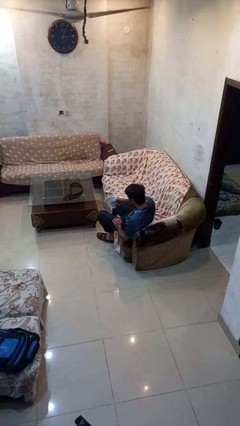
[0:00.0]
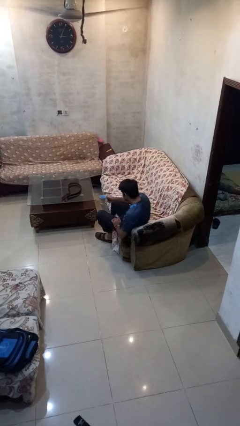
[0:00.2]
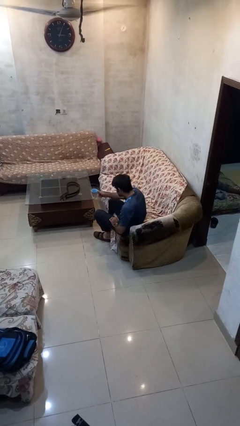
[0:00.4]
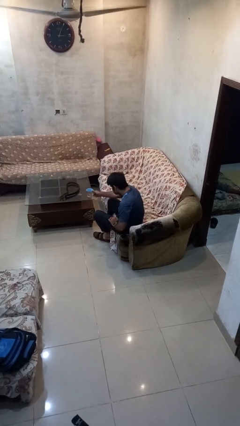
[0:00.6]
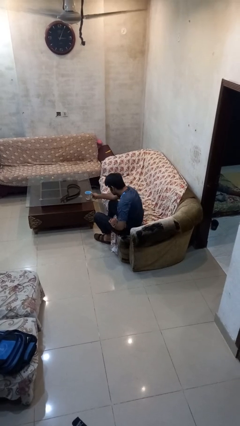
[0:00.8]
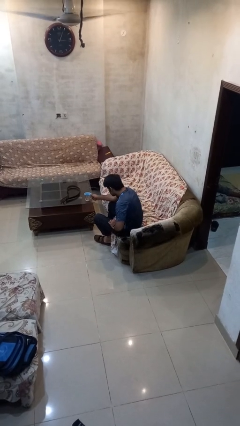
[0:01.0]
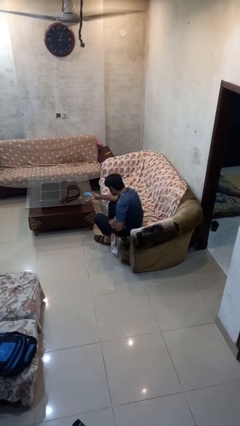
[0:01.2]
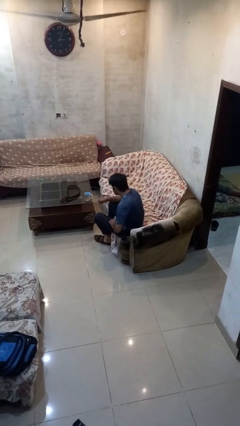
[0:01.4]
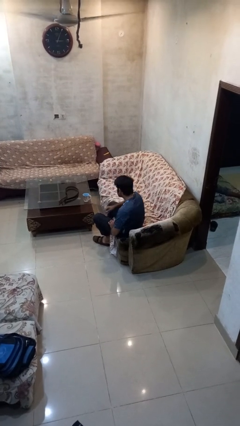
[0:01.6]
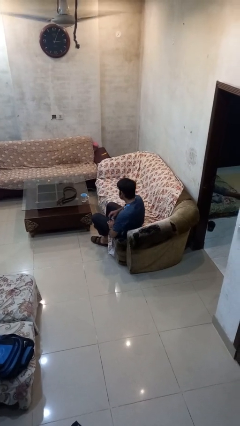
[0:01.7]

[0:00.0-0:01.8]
person puts down object on table

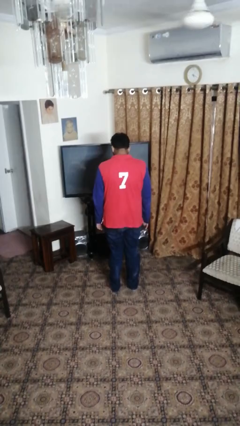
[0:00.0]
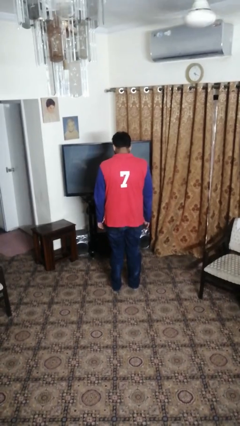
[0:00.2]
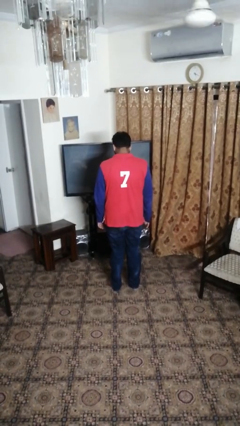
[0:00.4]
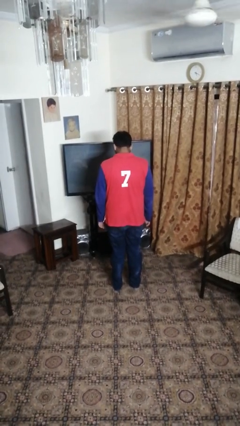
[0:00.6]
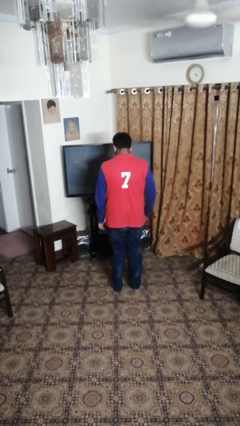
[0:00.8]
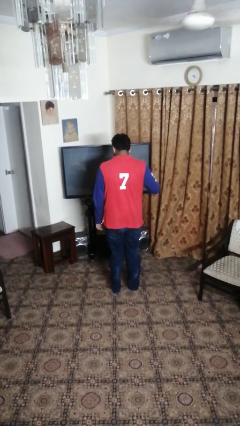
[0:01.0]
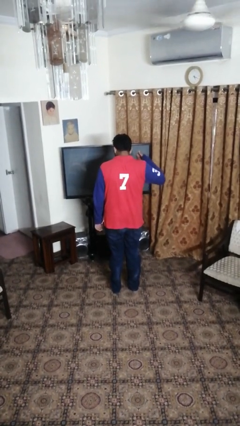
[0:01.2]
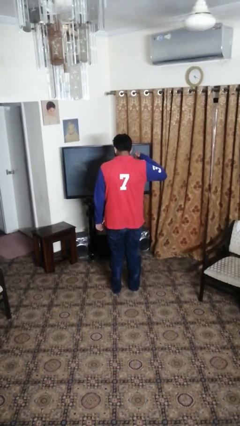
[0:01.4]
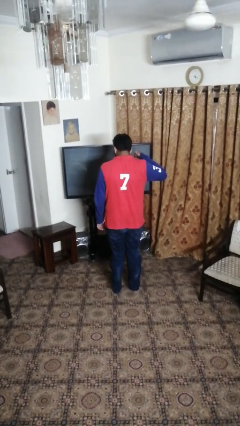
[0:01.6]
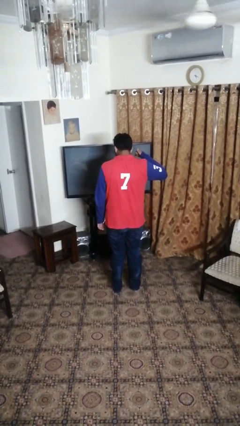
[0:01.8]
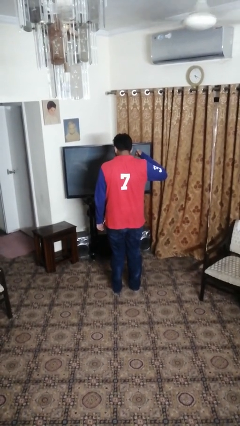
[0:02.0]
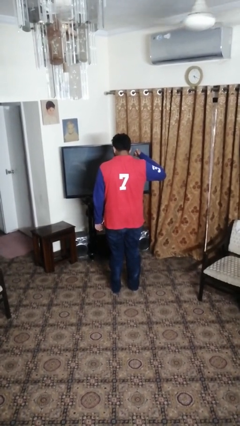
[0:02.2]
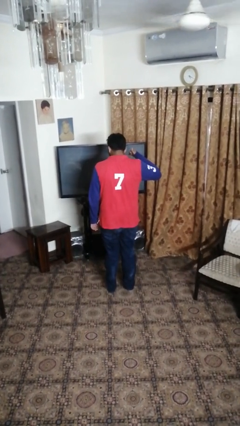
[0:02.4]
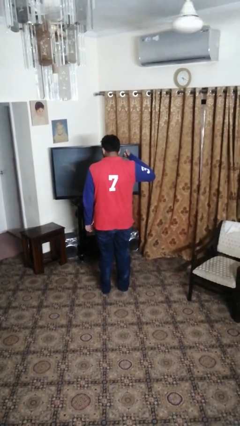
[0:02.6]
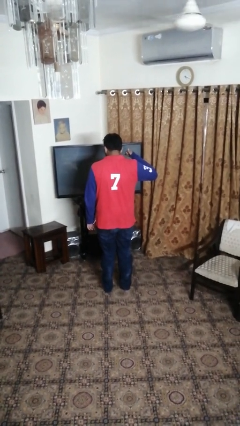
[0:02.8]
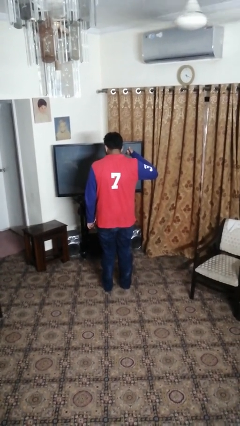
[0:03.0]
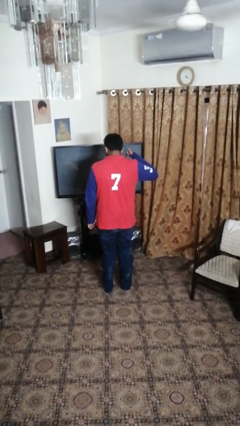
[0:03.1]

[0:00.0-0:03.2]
person gestures hang loose

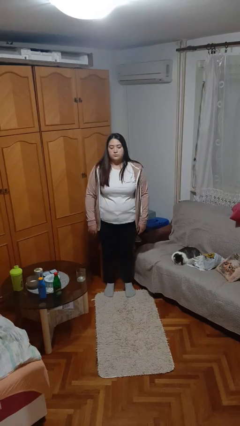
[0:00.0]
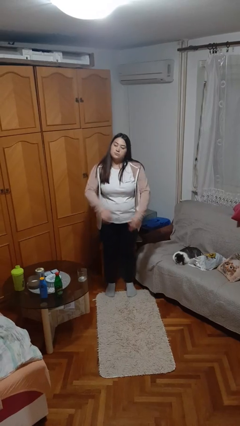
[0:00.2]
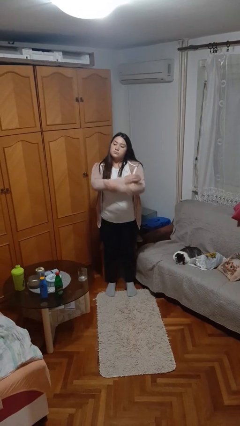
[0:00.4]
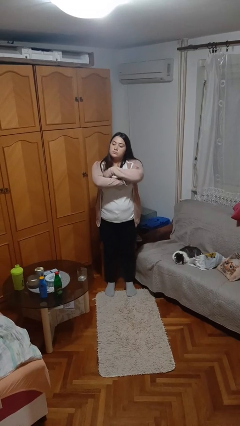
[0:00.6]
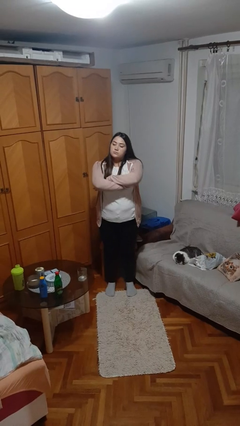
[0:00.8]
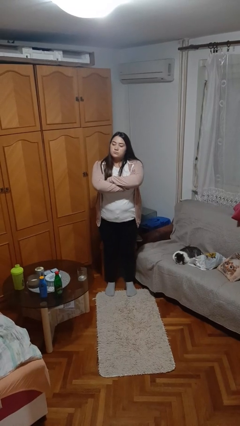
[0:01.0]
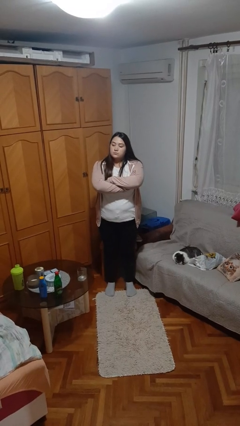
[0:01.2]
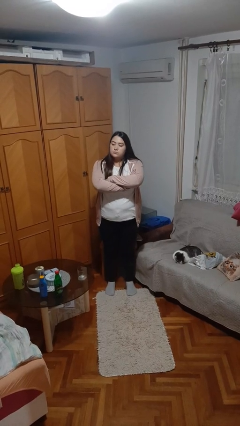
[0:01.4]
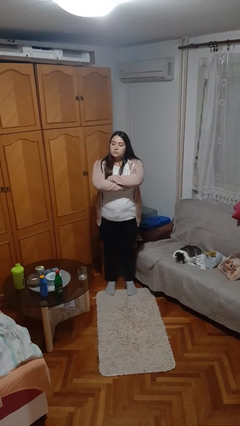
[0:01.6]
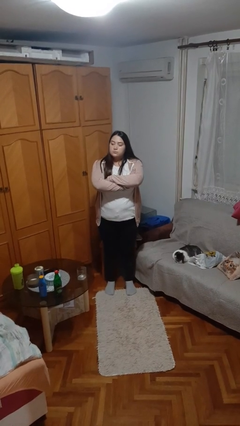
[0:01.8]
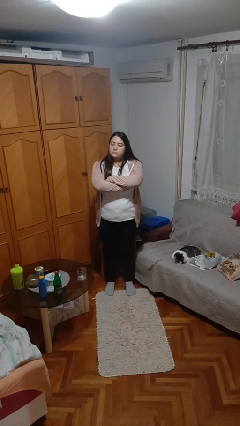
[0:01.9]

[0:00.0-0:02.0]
person crosses arms

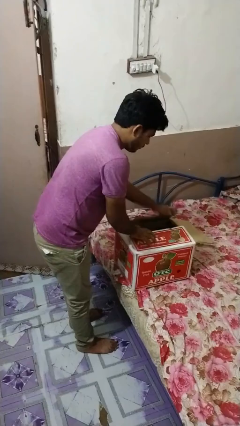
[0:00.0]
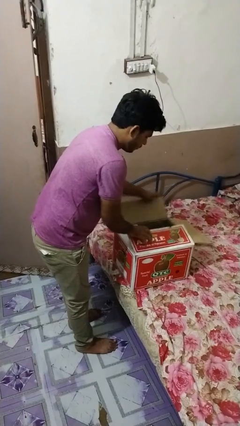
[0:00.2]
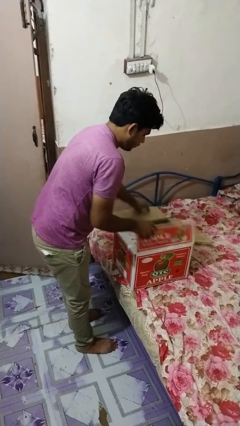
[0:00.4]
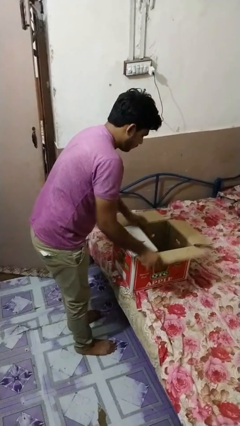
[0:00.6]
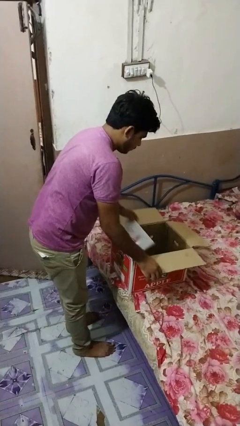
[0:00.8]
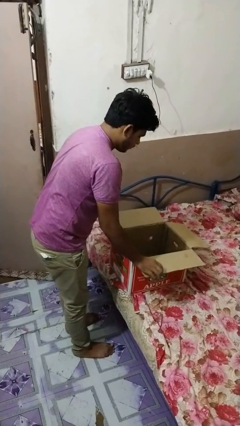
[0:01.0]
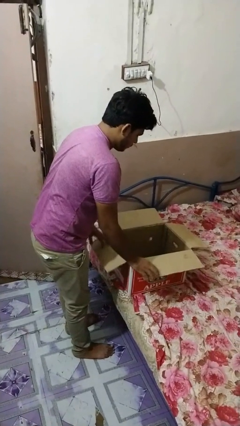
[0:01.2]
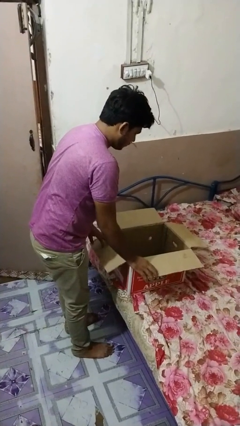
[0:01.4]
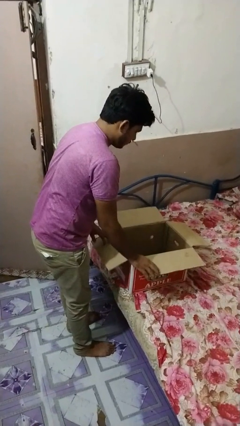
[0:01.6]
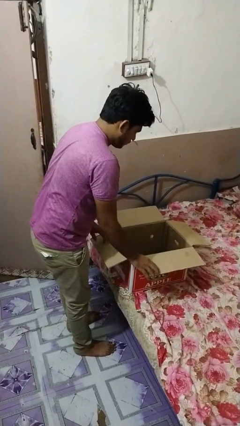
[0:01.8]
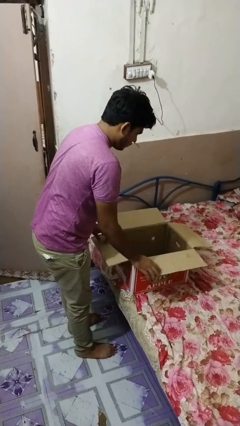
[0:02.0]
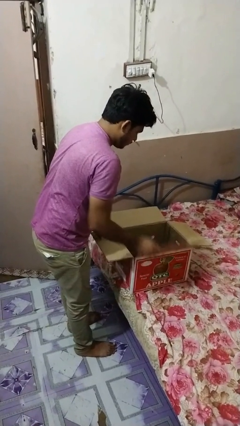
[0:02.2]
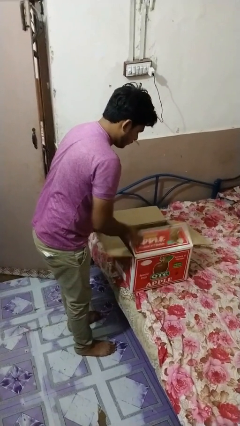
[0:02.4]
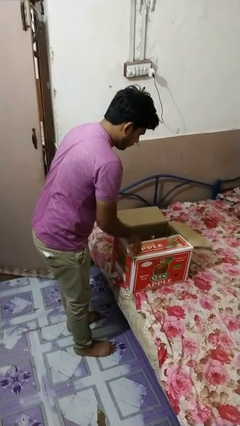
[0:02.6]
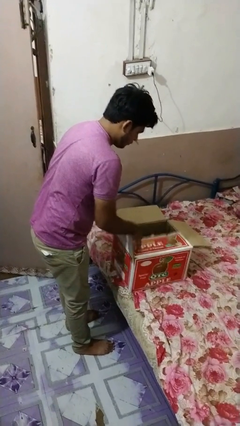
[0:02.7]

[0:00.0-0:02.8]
person opens box

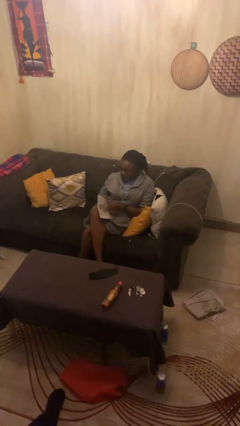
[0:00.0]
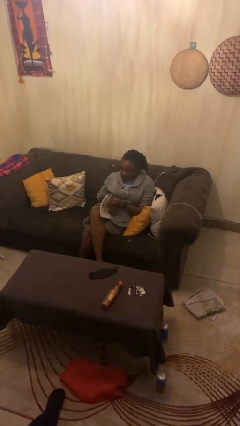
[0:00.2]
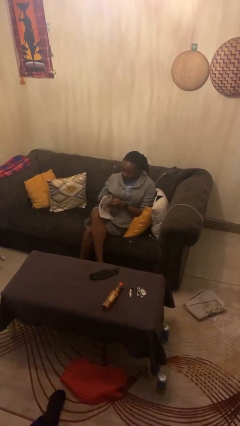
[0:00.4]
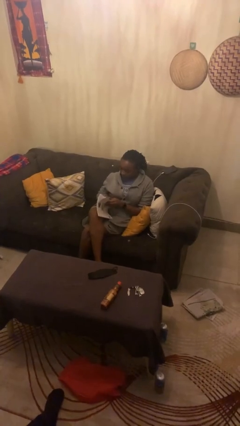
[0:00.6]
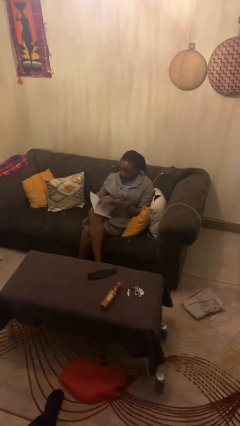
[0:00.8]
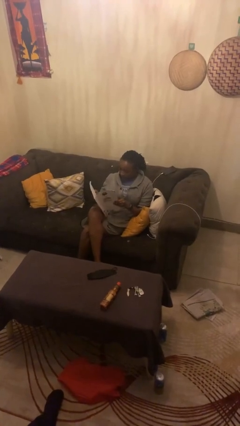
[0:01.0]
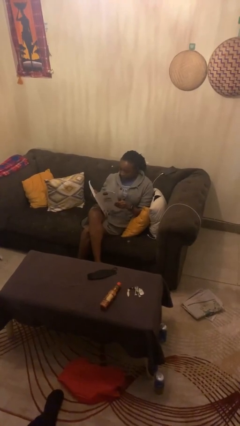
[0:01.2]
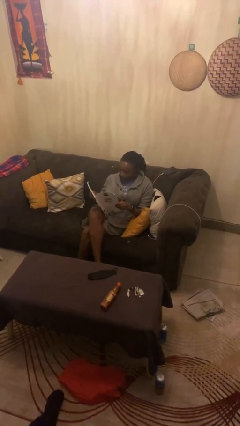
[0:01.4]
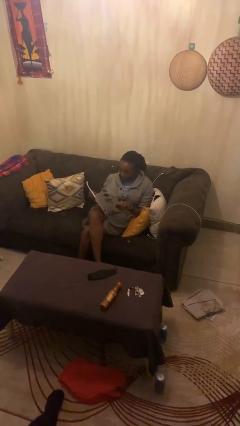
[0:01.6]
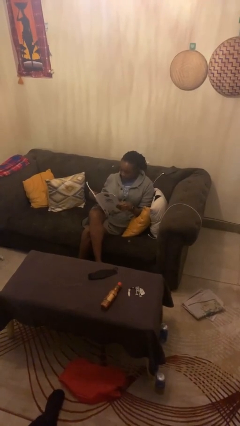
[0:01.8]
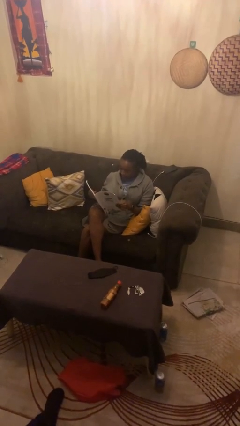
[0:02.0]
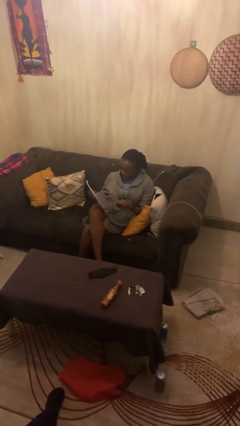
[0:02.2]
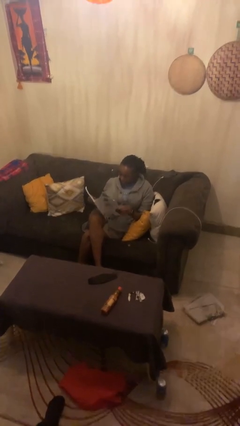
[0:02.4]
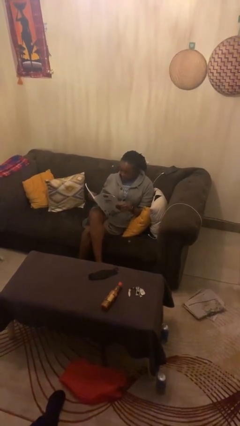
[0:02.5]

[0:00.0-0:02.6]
person reads magazine

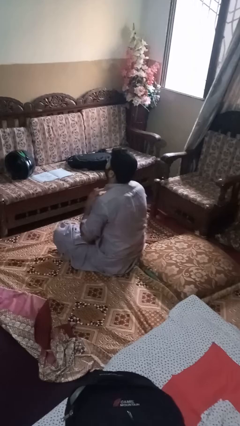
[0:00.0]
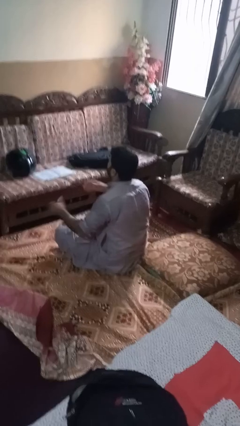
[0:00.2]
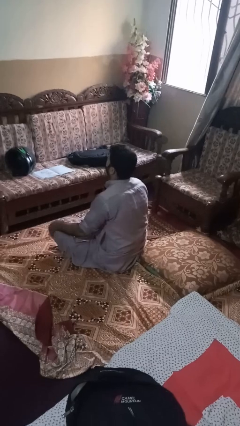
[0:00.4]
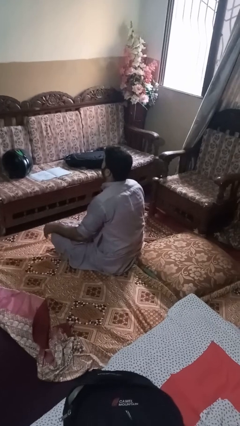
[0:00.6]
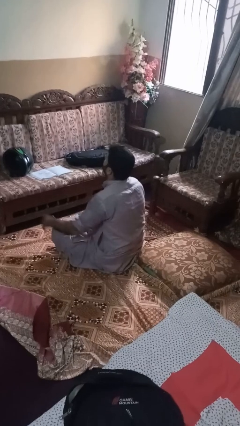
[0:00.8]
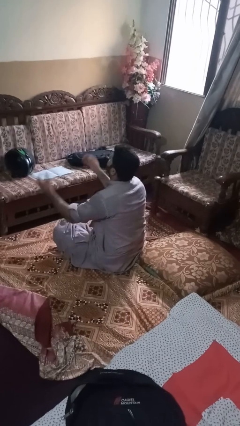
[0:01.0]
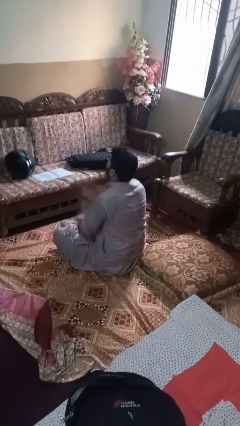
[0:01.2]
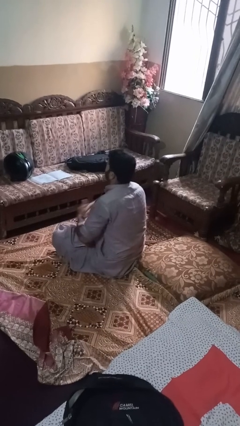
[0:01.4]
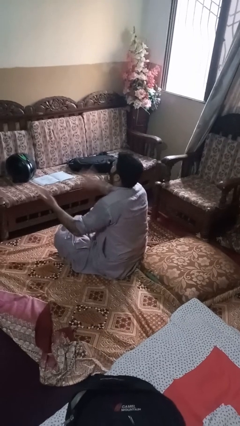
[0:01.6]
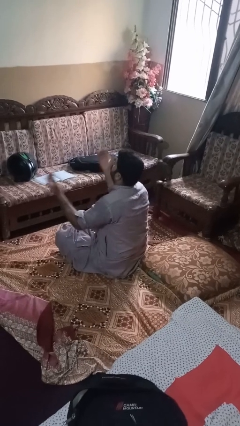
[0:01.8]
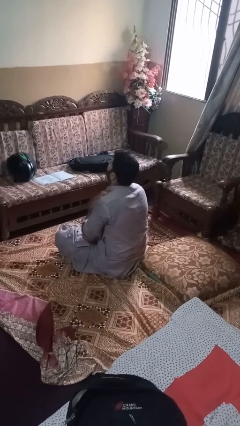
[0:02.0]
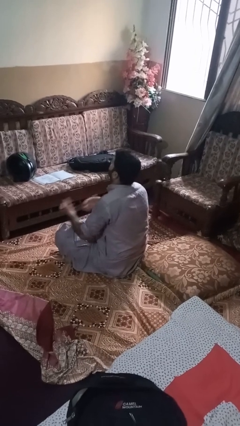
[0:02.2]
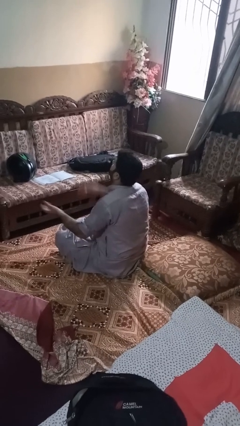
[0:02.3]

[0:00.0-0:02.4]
person drums on chest

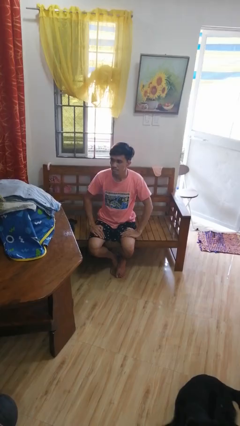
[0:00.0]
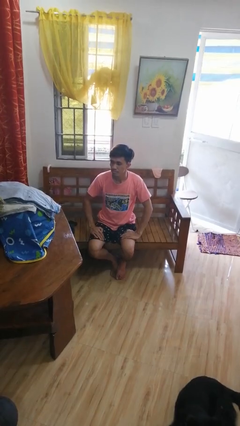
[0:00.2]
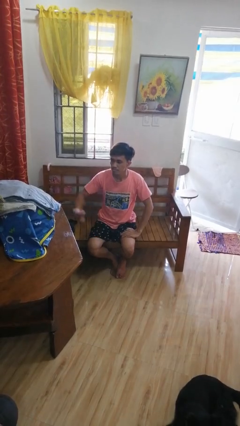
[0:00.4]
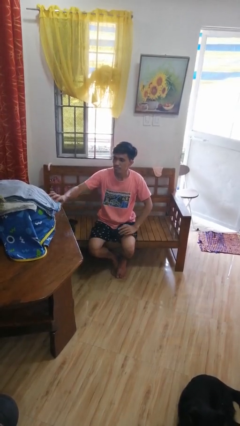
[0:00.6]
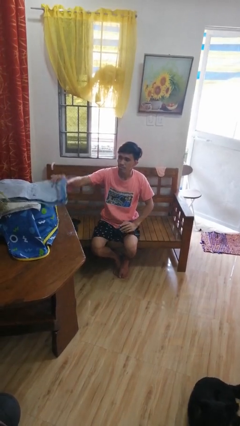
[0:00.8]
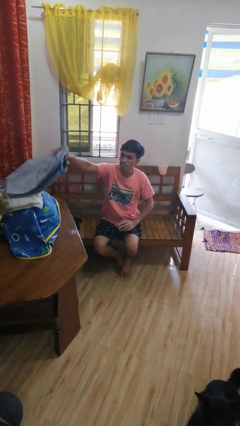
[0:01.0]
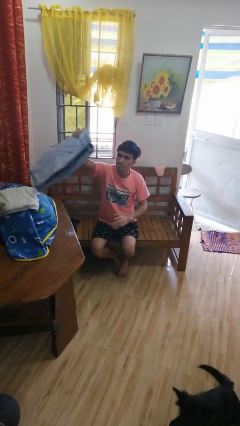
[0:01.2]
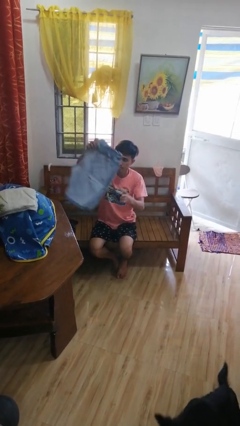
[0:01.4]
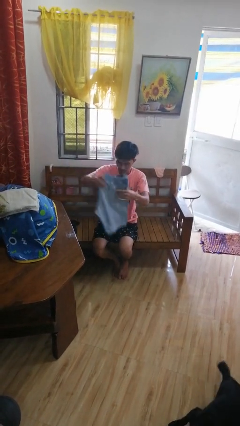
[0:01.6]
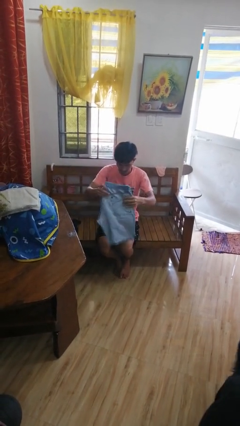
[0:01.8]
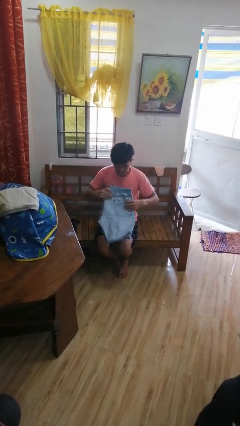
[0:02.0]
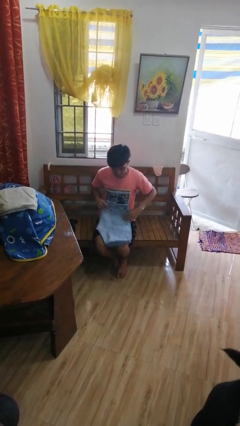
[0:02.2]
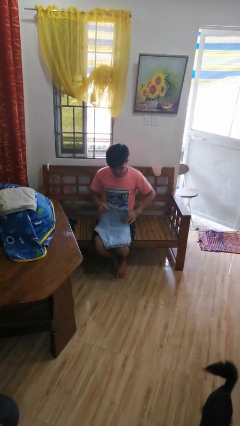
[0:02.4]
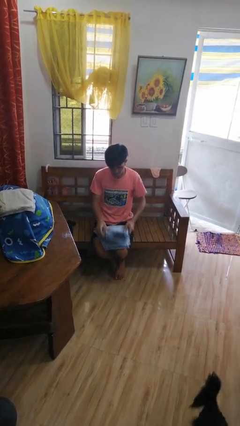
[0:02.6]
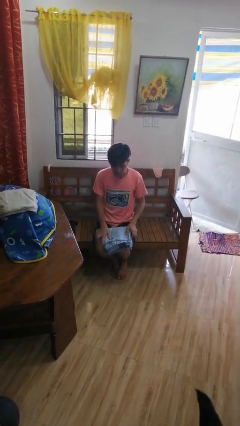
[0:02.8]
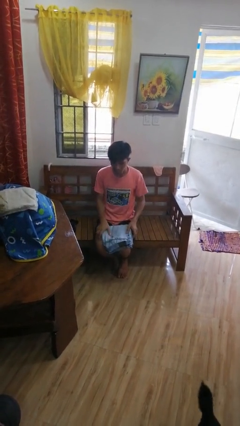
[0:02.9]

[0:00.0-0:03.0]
person folds pants
